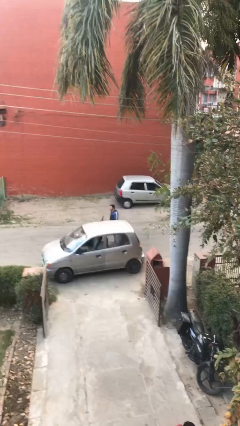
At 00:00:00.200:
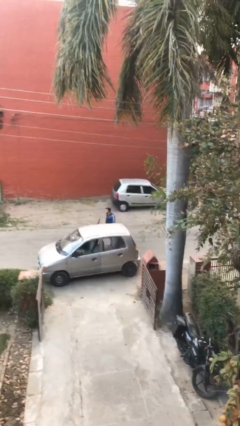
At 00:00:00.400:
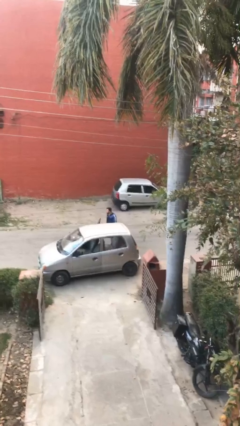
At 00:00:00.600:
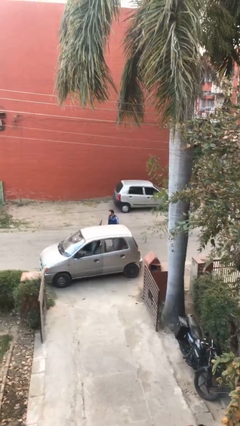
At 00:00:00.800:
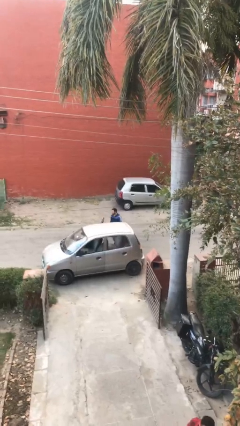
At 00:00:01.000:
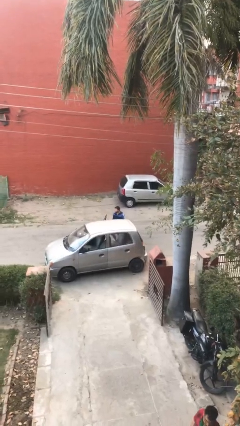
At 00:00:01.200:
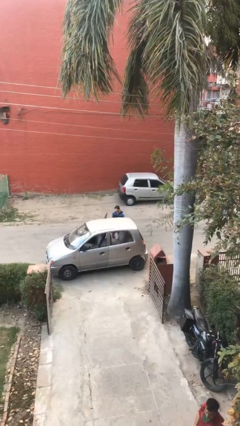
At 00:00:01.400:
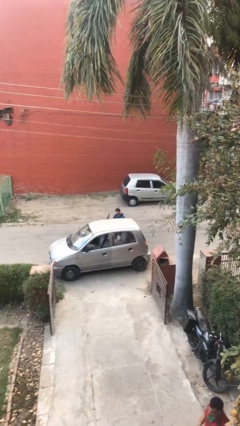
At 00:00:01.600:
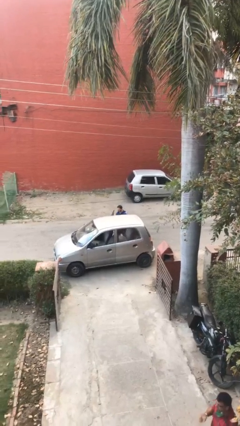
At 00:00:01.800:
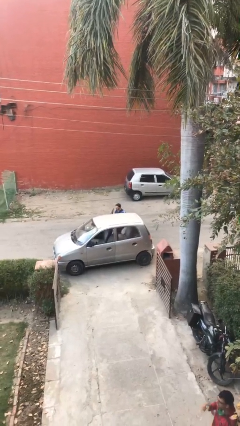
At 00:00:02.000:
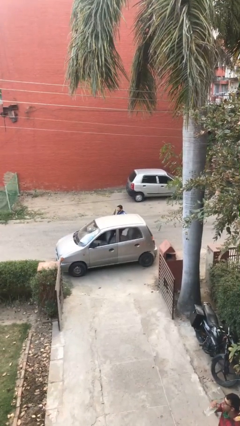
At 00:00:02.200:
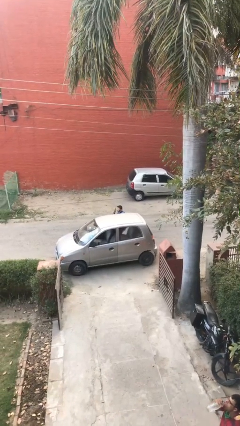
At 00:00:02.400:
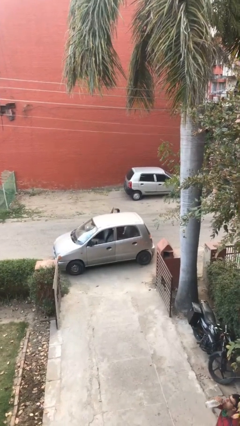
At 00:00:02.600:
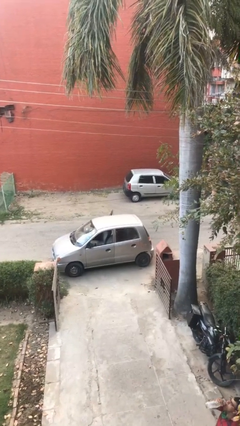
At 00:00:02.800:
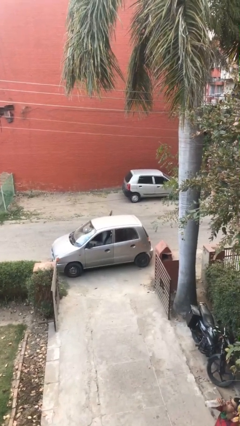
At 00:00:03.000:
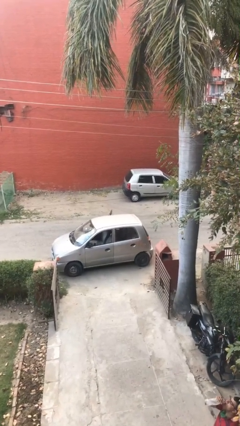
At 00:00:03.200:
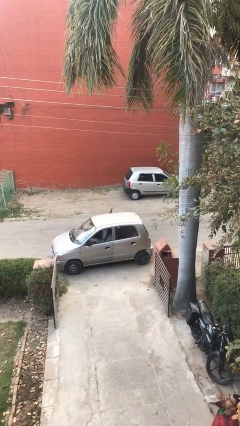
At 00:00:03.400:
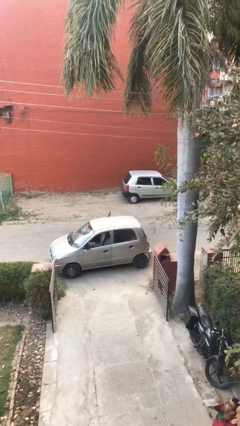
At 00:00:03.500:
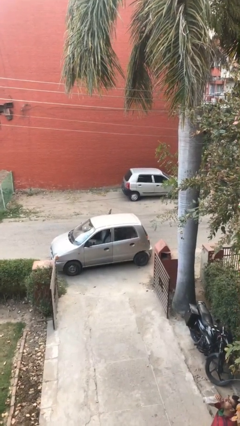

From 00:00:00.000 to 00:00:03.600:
person enters car

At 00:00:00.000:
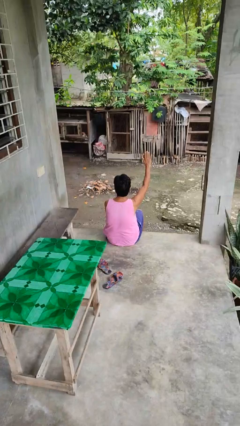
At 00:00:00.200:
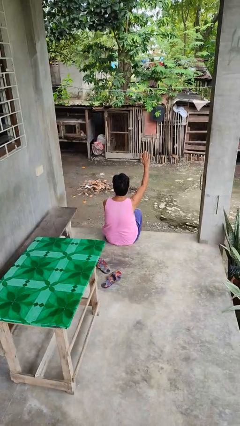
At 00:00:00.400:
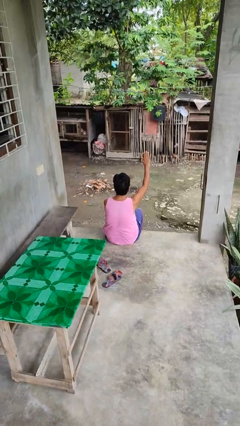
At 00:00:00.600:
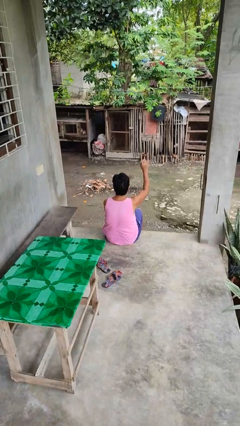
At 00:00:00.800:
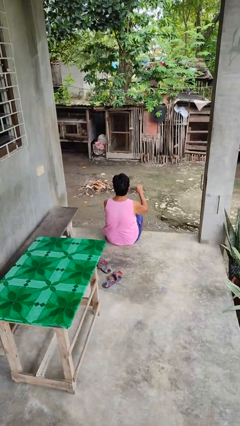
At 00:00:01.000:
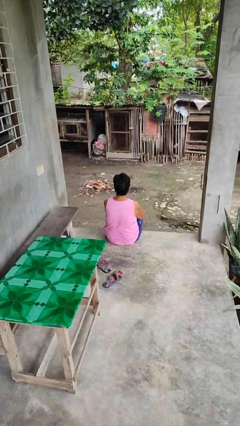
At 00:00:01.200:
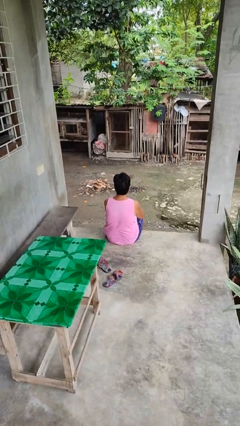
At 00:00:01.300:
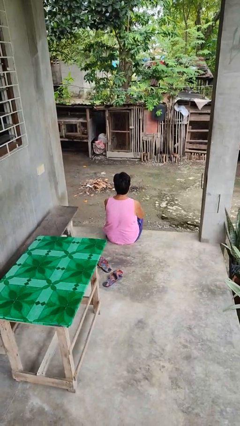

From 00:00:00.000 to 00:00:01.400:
person gestures lower hand

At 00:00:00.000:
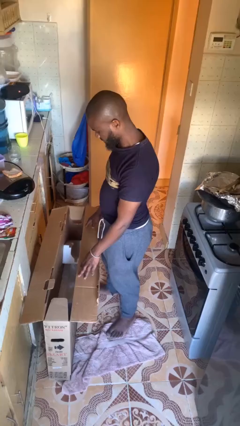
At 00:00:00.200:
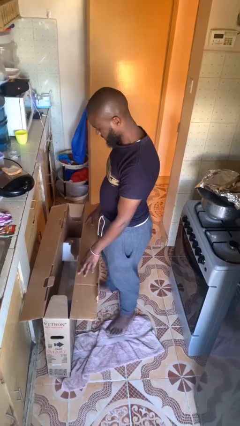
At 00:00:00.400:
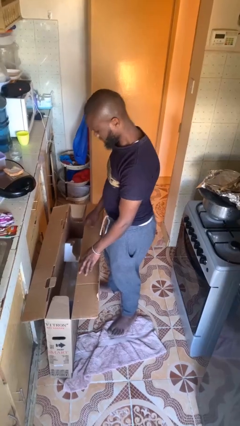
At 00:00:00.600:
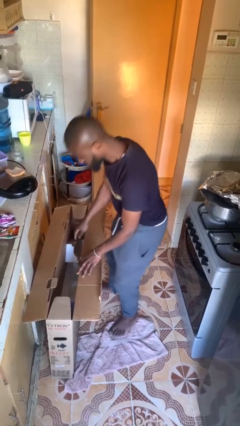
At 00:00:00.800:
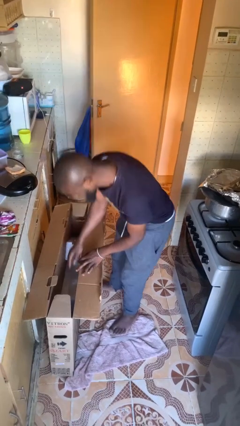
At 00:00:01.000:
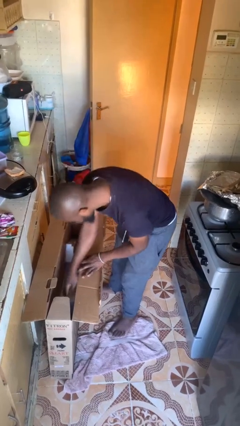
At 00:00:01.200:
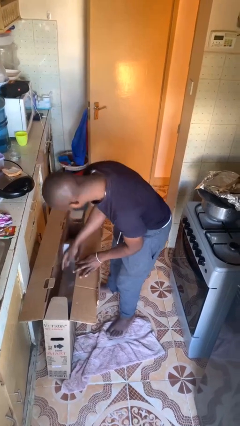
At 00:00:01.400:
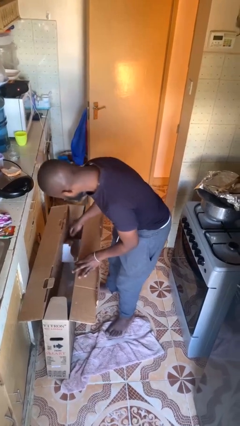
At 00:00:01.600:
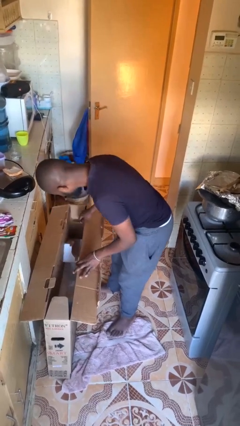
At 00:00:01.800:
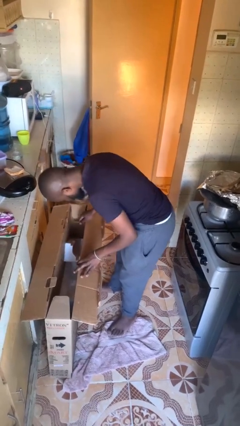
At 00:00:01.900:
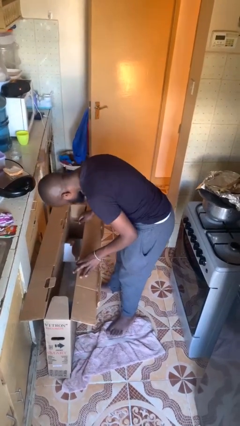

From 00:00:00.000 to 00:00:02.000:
person searches in box

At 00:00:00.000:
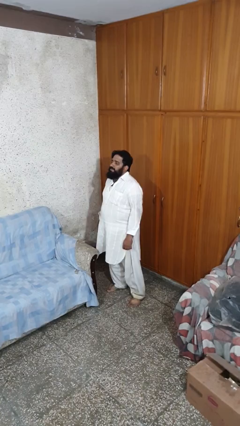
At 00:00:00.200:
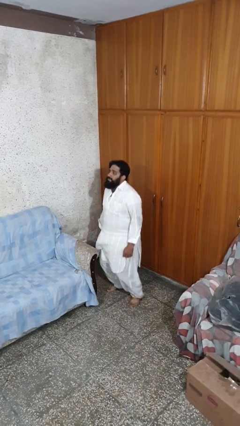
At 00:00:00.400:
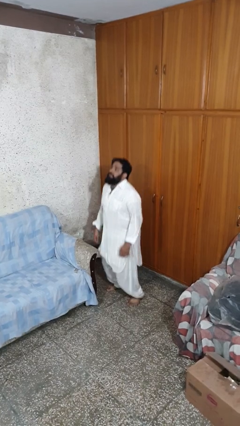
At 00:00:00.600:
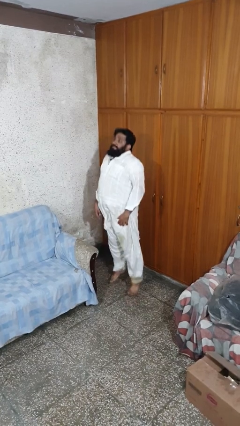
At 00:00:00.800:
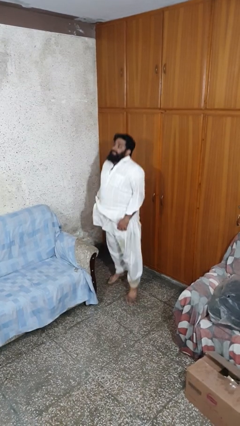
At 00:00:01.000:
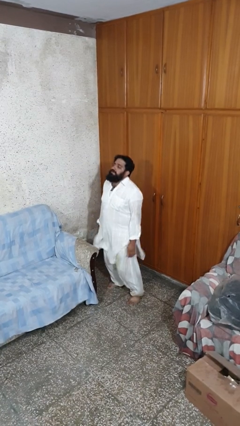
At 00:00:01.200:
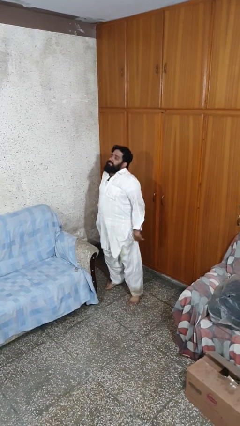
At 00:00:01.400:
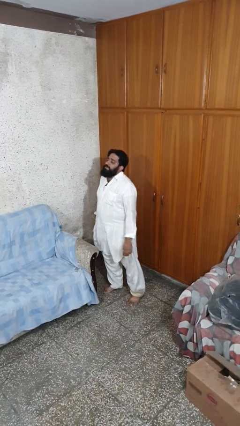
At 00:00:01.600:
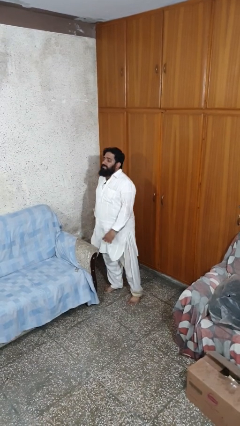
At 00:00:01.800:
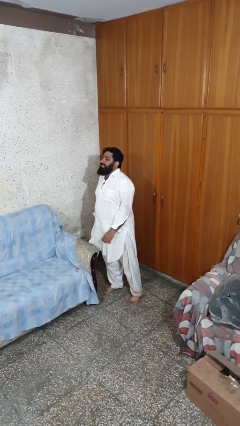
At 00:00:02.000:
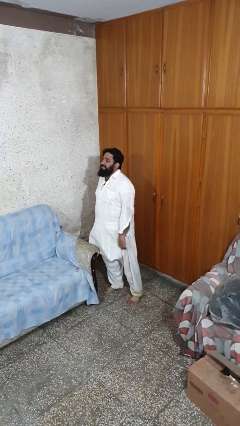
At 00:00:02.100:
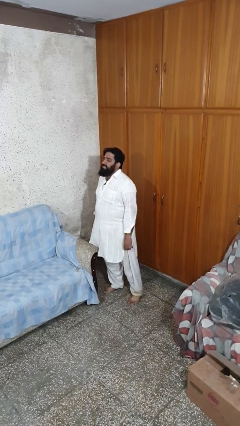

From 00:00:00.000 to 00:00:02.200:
person jumps

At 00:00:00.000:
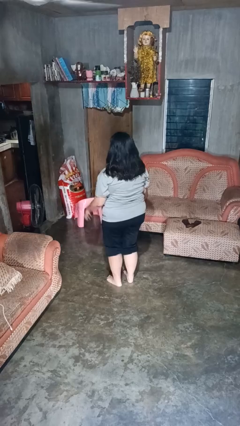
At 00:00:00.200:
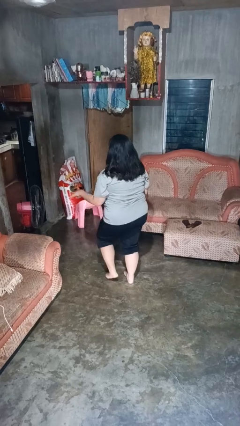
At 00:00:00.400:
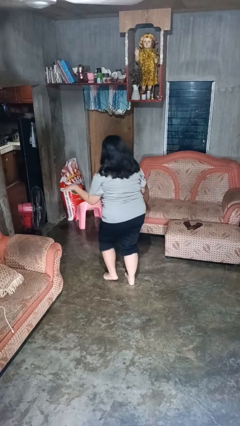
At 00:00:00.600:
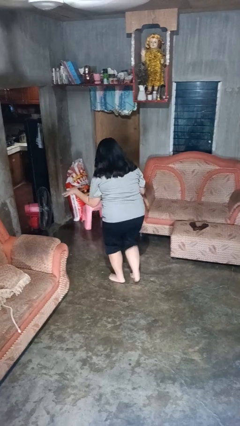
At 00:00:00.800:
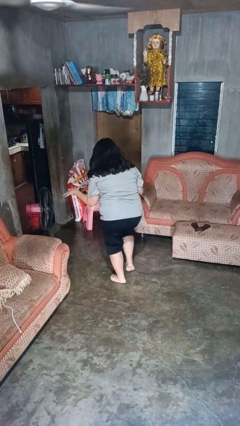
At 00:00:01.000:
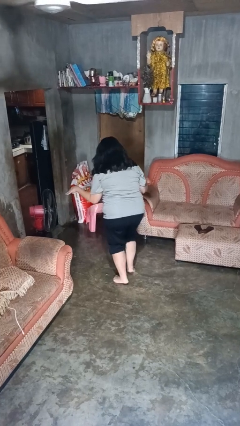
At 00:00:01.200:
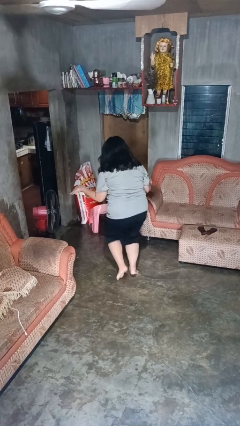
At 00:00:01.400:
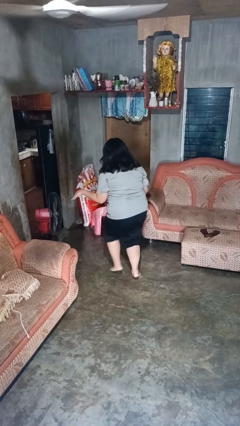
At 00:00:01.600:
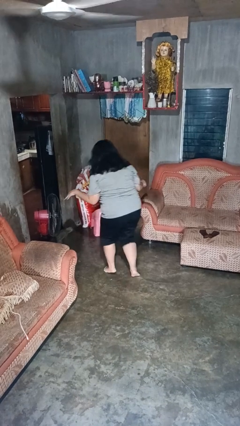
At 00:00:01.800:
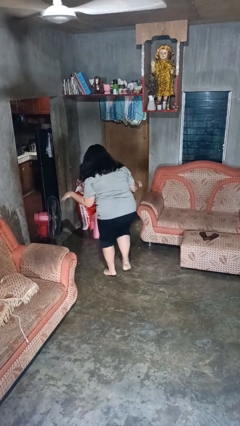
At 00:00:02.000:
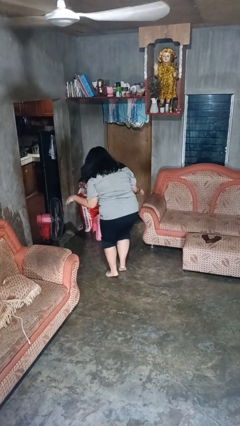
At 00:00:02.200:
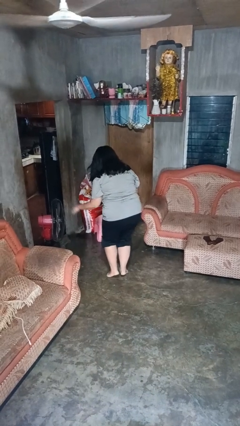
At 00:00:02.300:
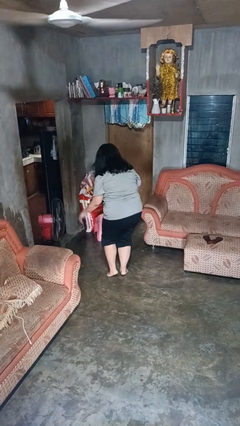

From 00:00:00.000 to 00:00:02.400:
person walks tiptoe

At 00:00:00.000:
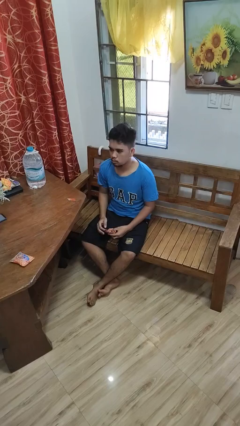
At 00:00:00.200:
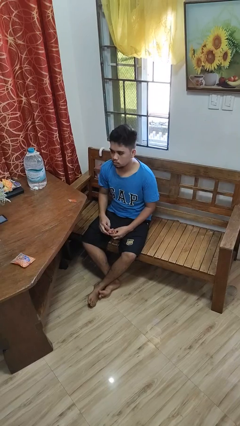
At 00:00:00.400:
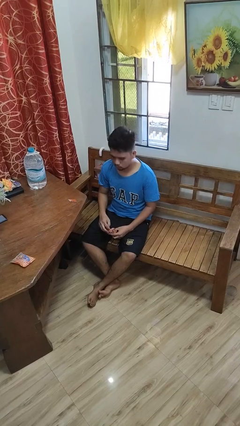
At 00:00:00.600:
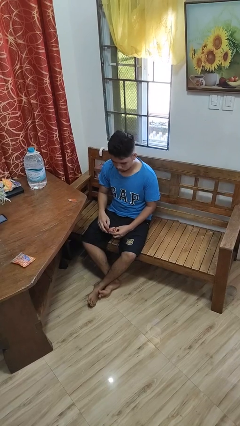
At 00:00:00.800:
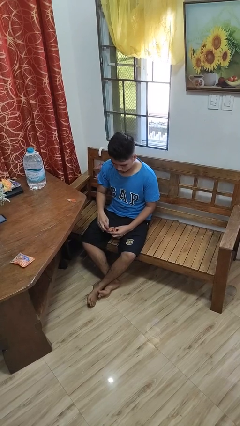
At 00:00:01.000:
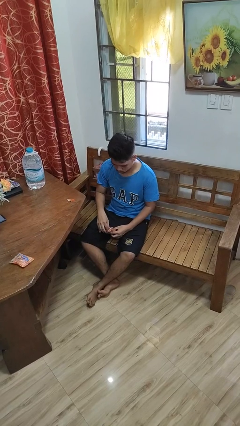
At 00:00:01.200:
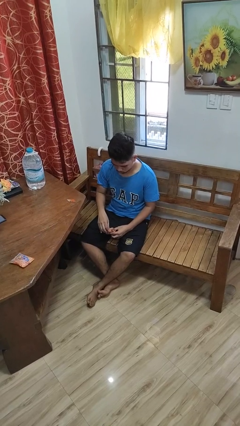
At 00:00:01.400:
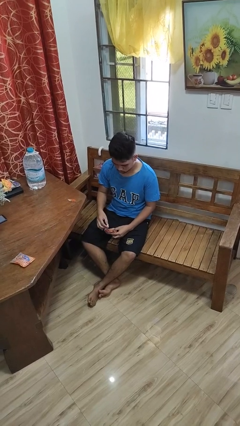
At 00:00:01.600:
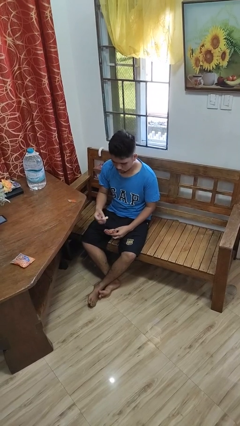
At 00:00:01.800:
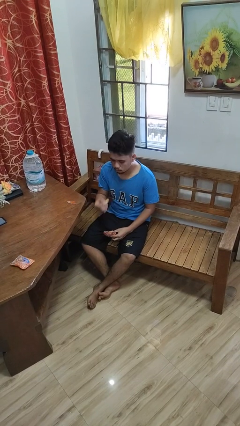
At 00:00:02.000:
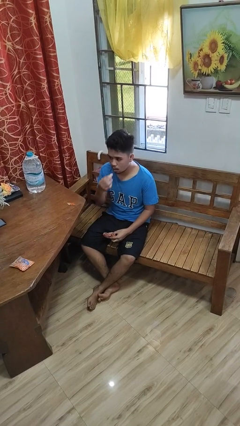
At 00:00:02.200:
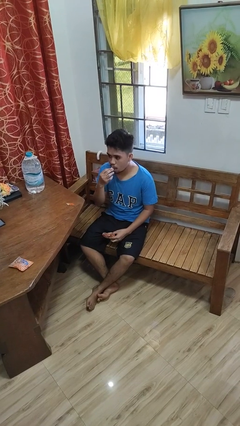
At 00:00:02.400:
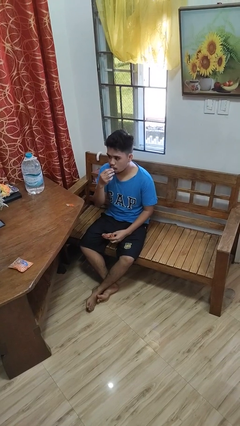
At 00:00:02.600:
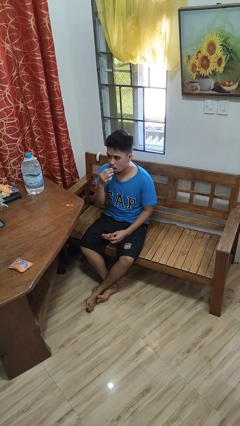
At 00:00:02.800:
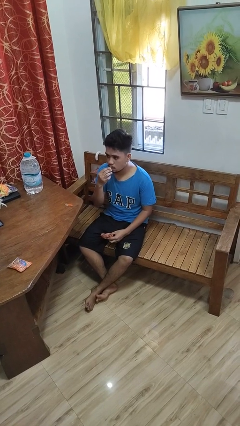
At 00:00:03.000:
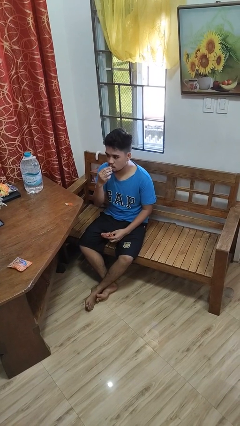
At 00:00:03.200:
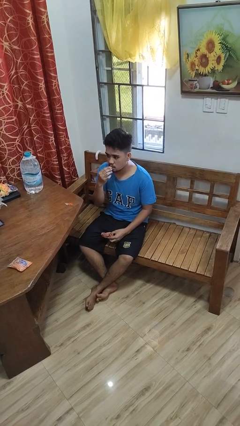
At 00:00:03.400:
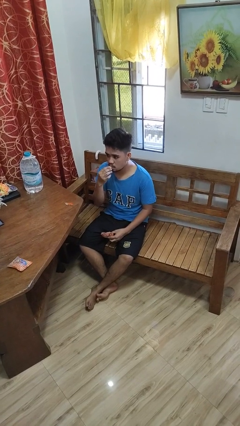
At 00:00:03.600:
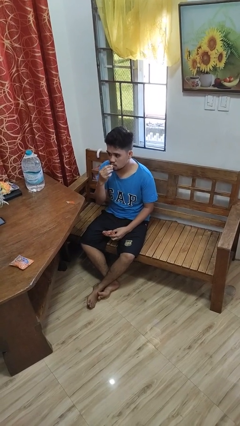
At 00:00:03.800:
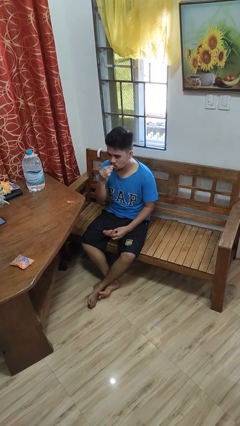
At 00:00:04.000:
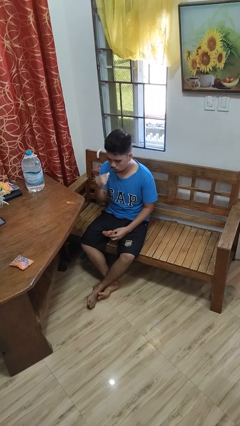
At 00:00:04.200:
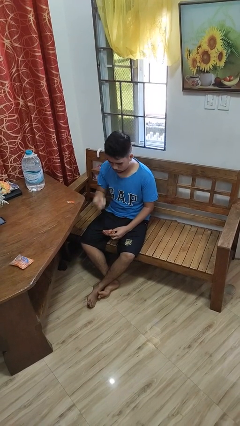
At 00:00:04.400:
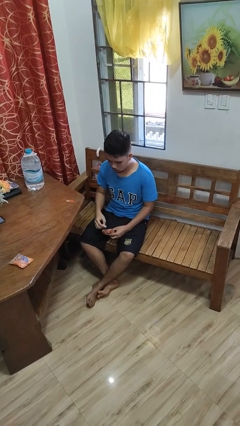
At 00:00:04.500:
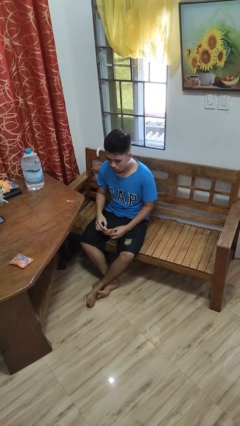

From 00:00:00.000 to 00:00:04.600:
person eats snack from bag

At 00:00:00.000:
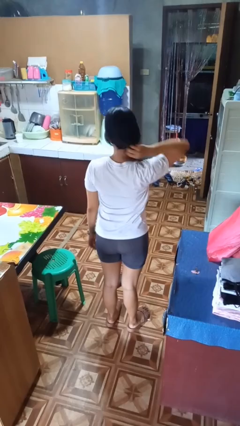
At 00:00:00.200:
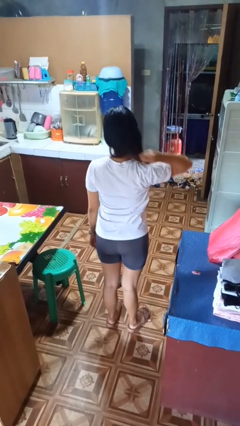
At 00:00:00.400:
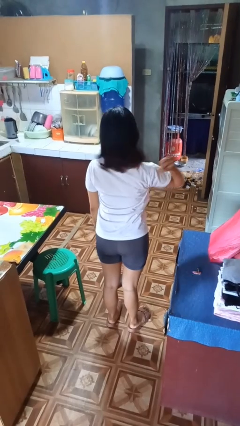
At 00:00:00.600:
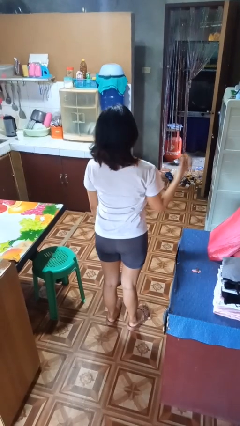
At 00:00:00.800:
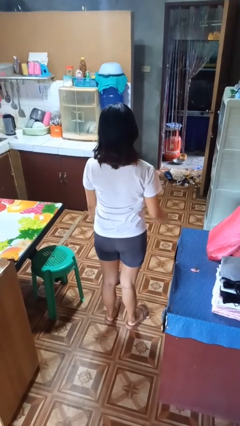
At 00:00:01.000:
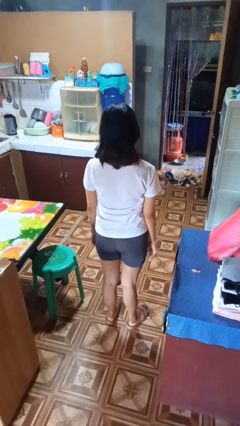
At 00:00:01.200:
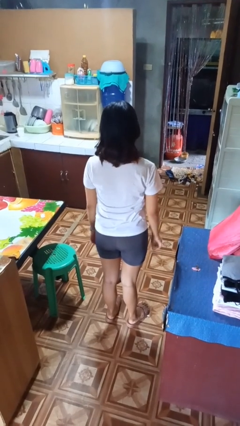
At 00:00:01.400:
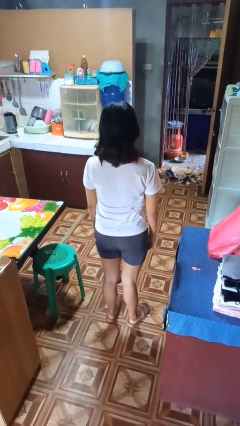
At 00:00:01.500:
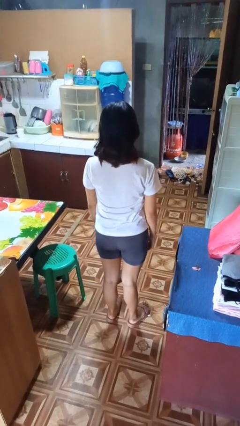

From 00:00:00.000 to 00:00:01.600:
person takes off hairtie
